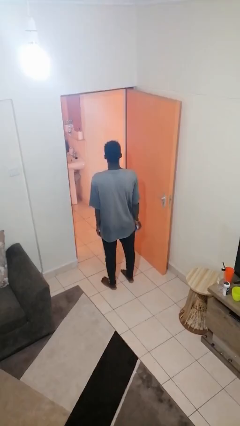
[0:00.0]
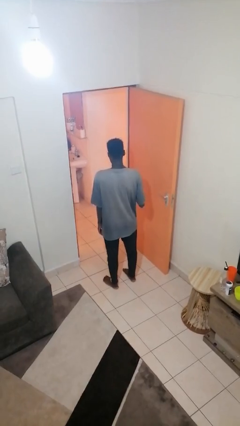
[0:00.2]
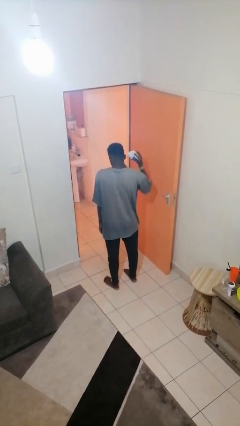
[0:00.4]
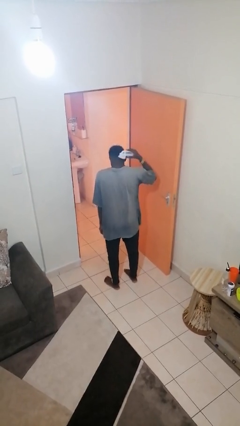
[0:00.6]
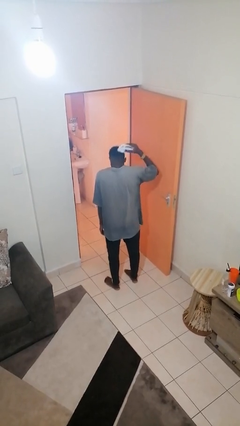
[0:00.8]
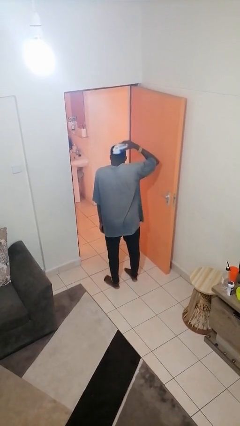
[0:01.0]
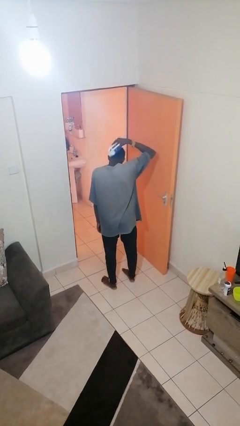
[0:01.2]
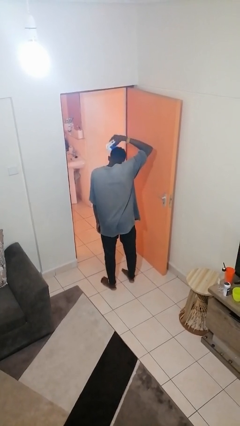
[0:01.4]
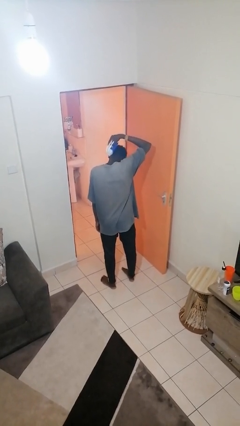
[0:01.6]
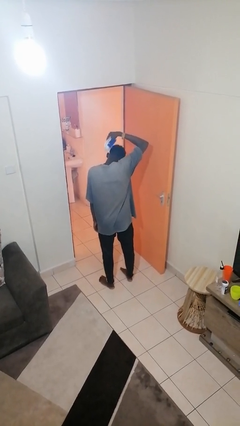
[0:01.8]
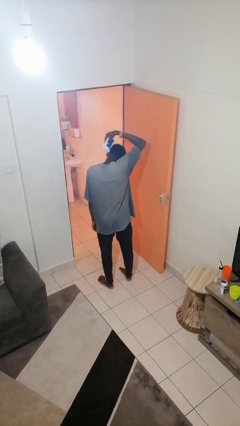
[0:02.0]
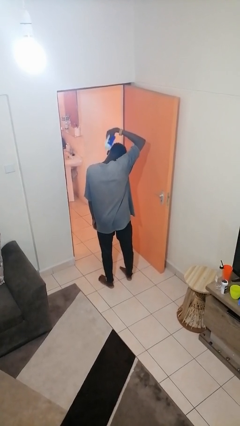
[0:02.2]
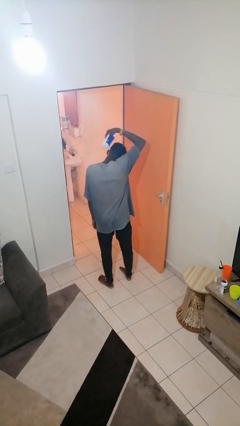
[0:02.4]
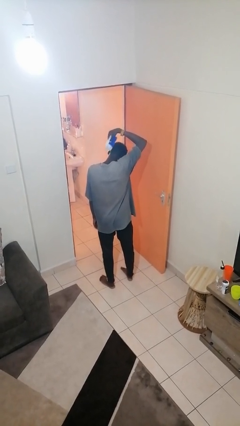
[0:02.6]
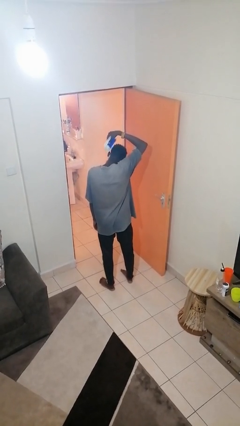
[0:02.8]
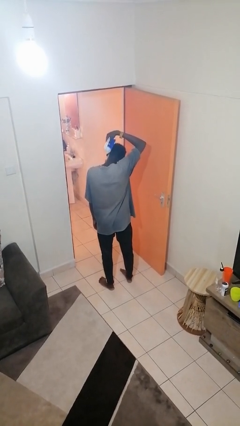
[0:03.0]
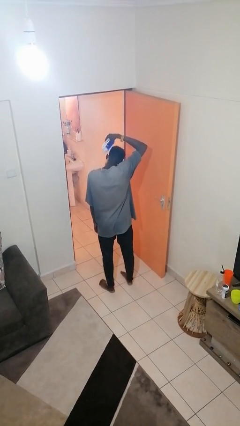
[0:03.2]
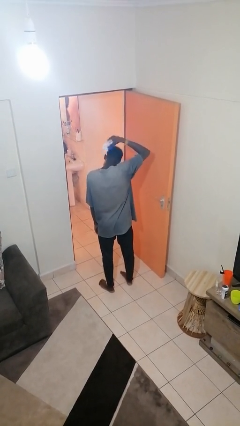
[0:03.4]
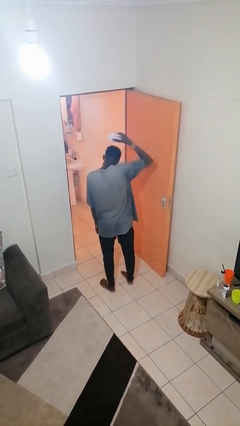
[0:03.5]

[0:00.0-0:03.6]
person brushes hair

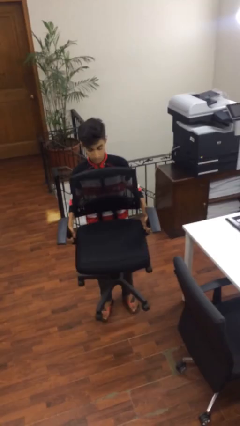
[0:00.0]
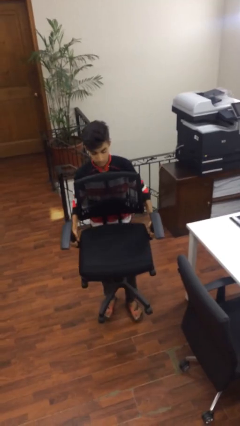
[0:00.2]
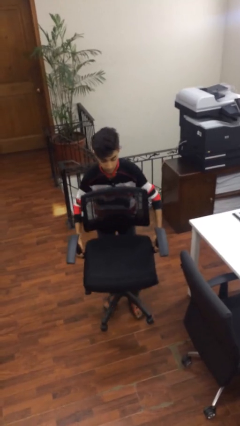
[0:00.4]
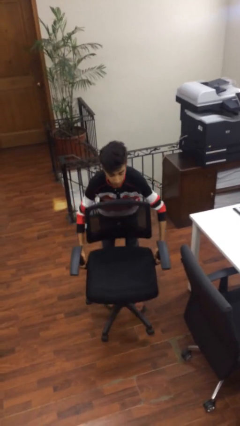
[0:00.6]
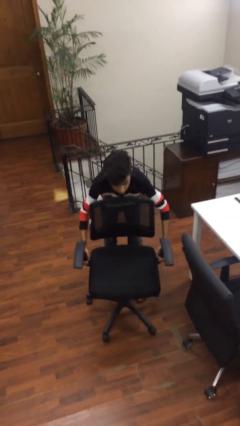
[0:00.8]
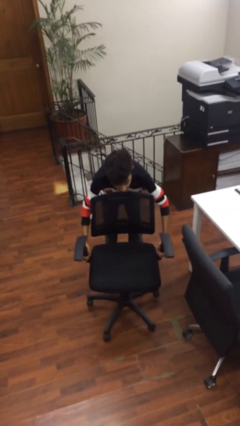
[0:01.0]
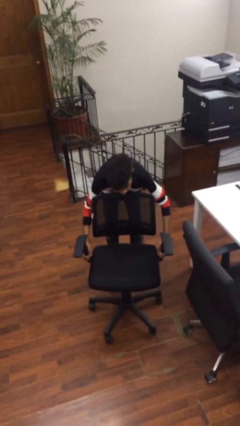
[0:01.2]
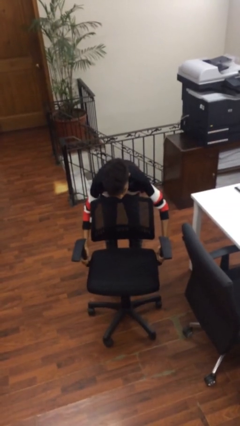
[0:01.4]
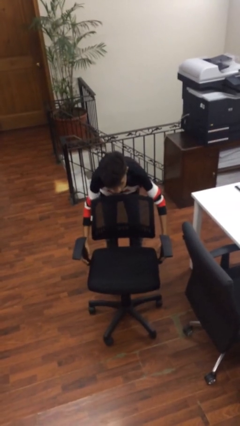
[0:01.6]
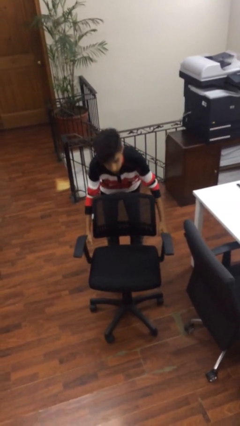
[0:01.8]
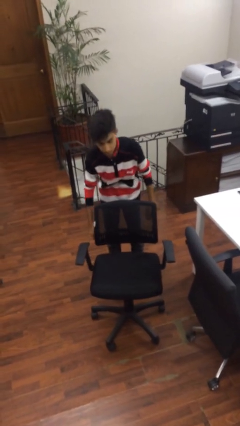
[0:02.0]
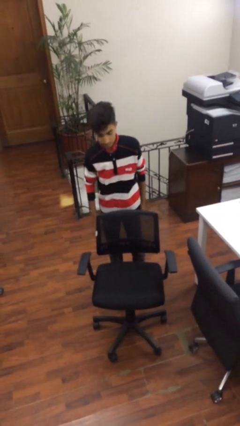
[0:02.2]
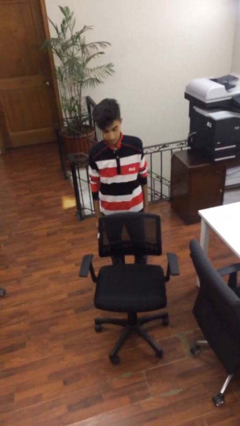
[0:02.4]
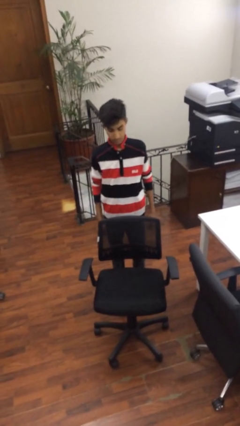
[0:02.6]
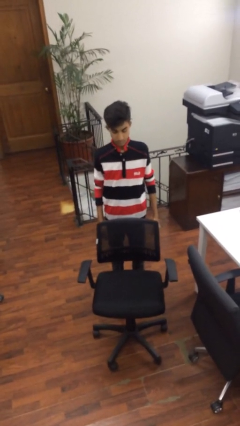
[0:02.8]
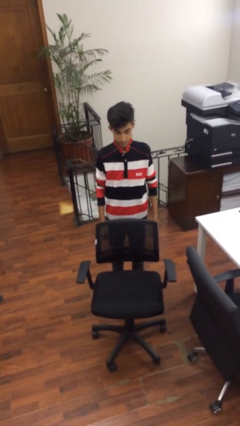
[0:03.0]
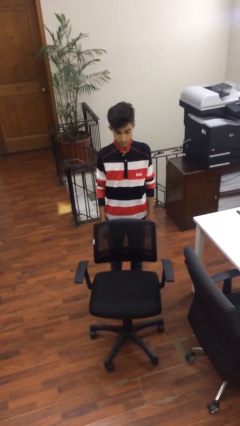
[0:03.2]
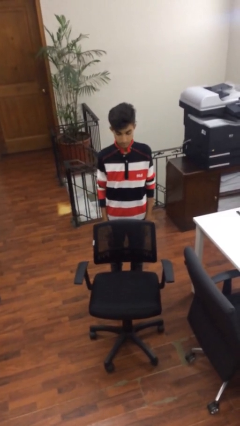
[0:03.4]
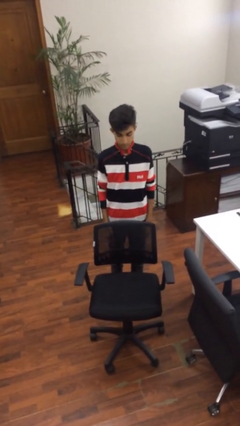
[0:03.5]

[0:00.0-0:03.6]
person puts down object on floor

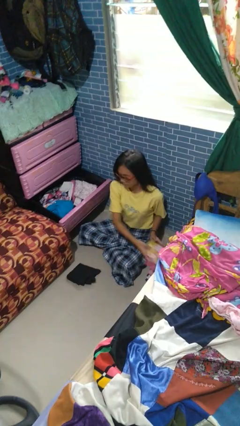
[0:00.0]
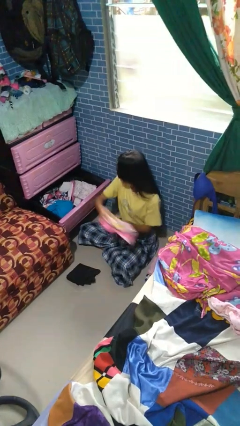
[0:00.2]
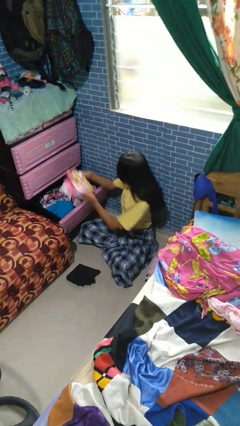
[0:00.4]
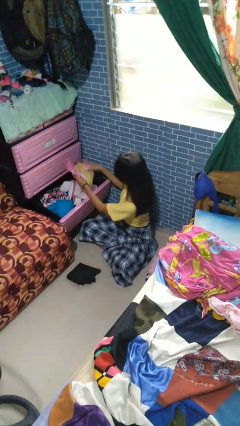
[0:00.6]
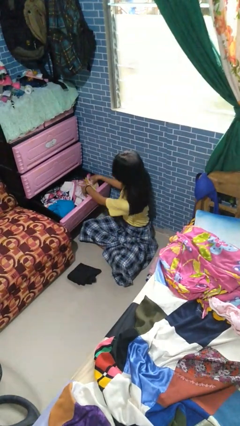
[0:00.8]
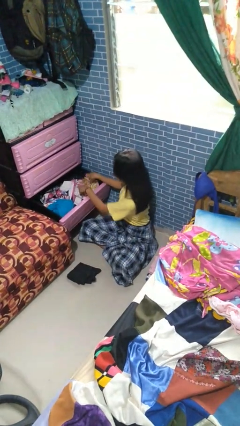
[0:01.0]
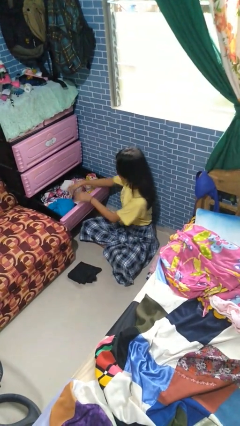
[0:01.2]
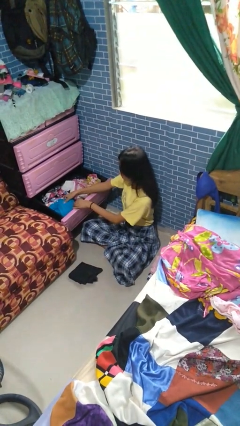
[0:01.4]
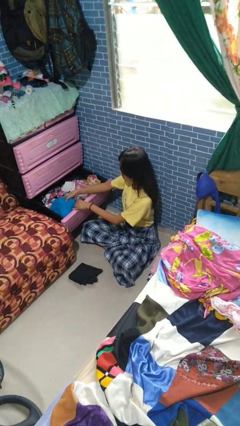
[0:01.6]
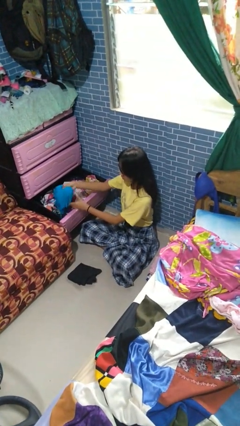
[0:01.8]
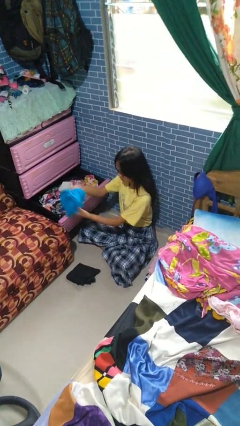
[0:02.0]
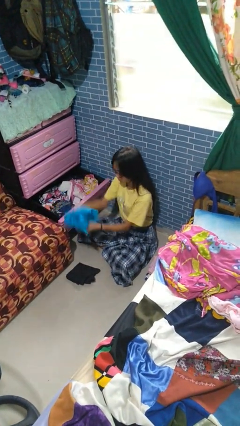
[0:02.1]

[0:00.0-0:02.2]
person puts clothes into dresser

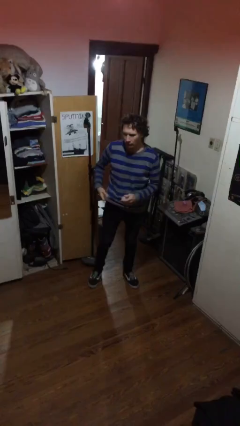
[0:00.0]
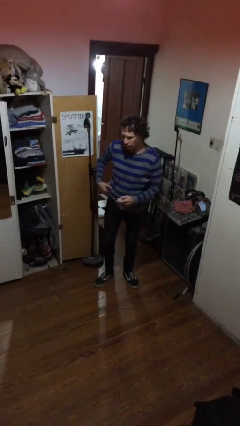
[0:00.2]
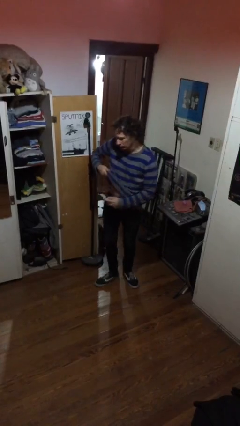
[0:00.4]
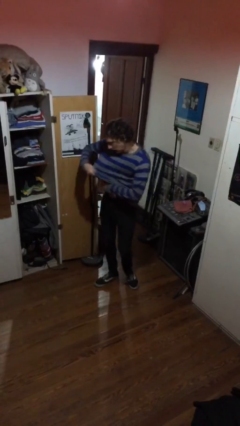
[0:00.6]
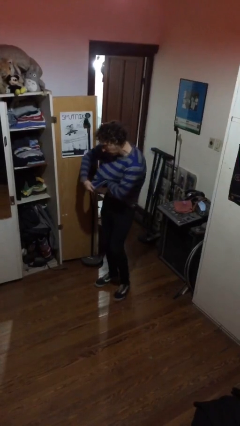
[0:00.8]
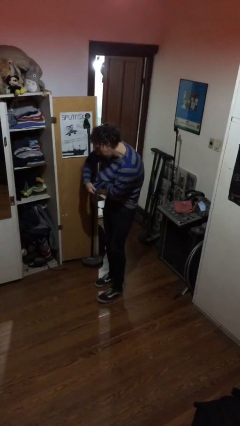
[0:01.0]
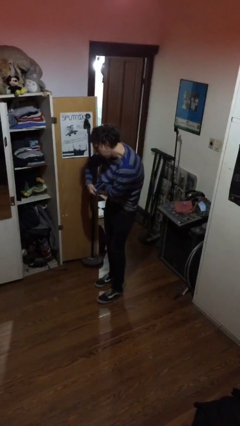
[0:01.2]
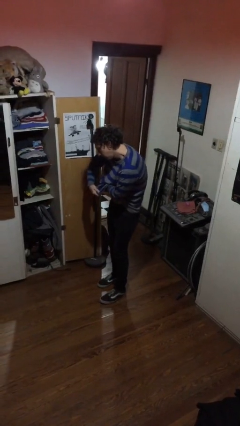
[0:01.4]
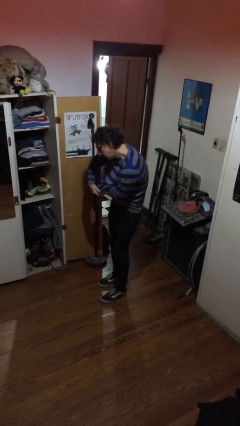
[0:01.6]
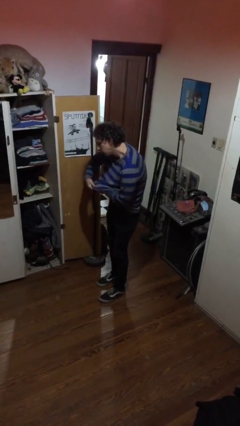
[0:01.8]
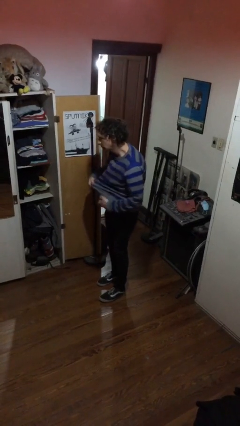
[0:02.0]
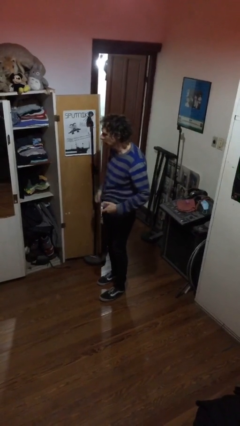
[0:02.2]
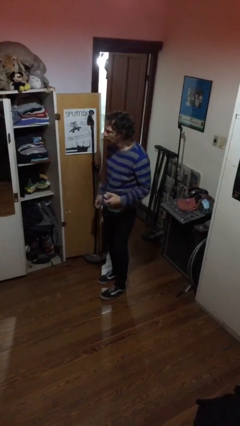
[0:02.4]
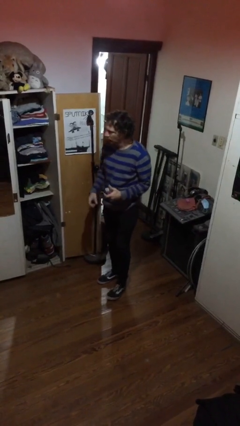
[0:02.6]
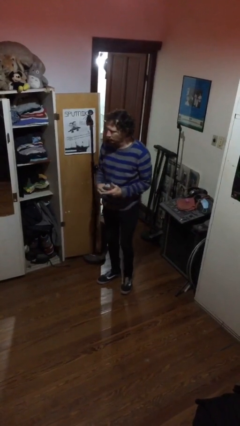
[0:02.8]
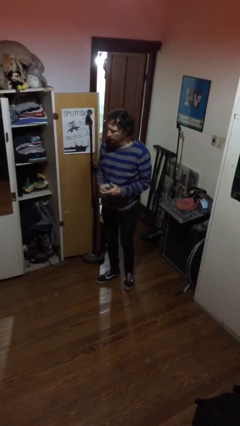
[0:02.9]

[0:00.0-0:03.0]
person applies deodorant

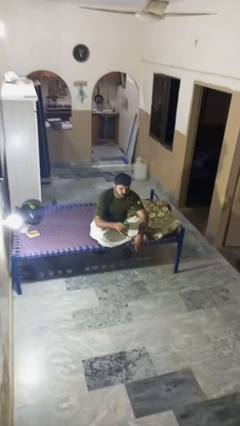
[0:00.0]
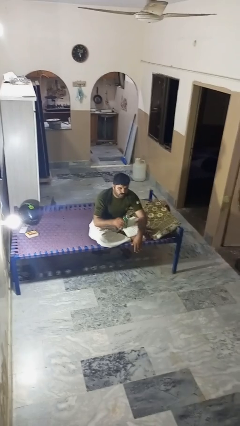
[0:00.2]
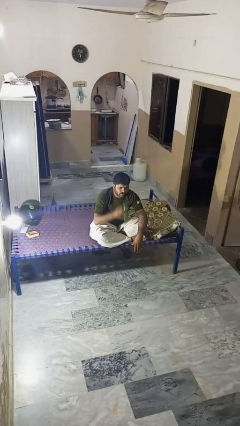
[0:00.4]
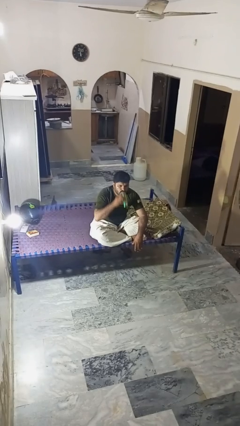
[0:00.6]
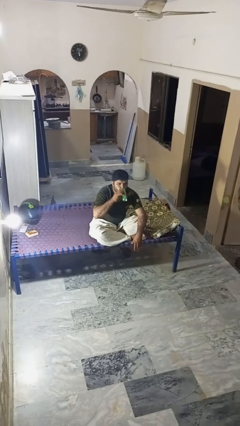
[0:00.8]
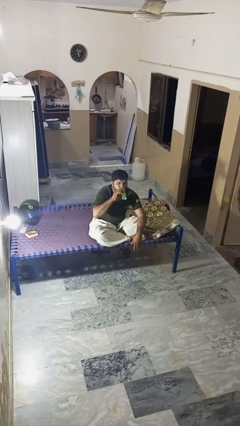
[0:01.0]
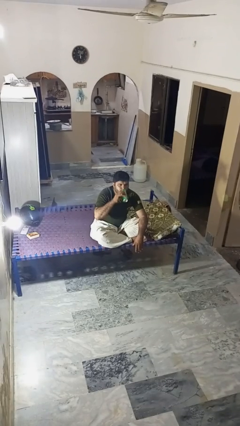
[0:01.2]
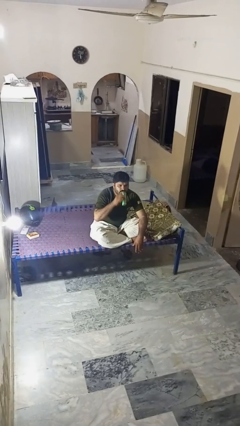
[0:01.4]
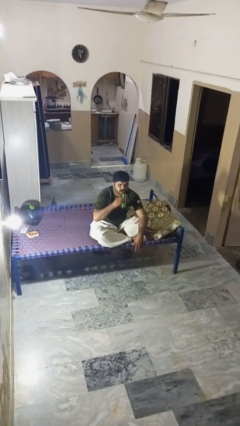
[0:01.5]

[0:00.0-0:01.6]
person drinks from beverage can

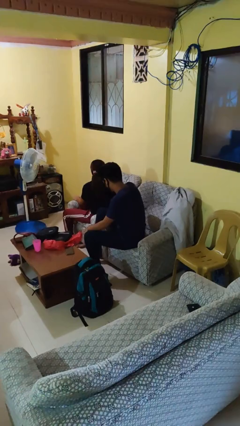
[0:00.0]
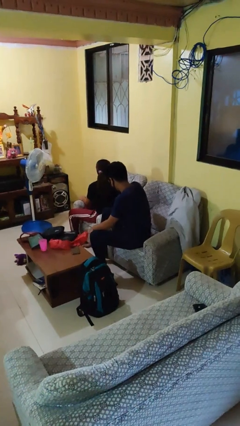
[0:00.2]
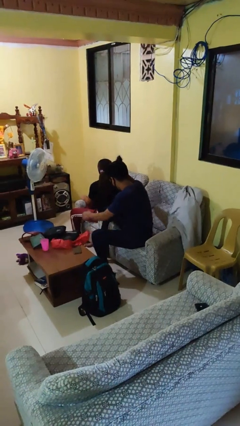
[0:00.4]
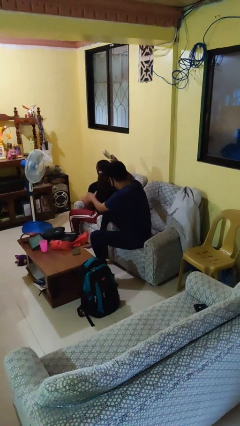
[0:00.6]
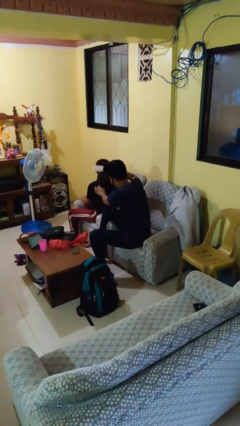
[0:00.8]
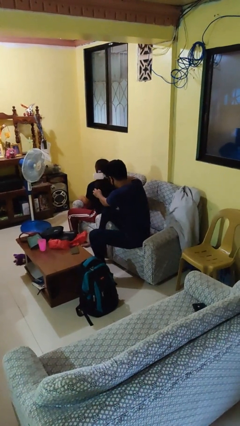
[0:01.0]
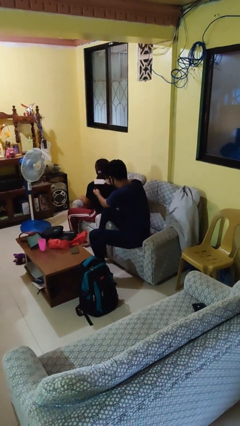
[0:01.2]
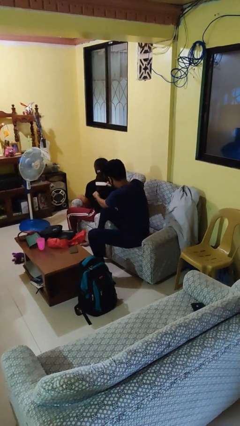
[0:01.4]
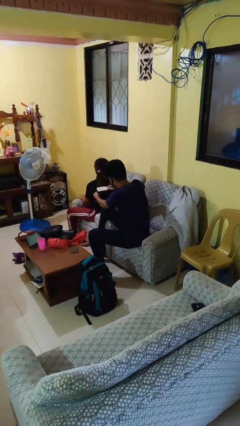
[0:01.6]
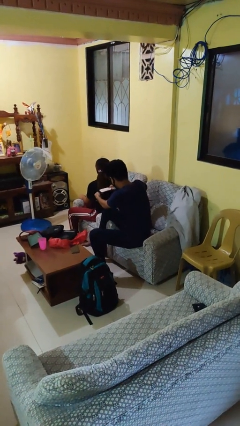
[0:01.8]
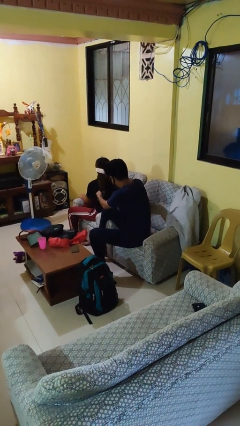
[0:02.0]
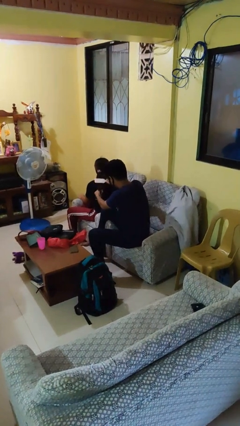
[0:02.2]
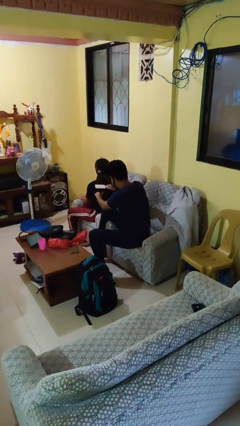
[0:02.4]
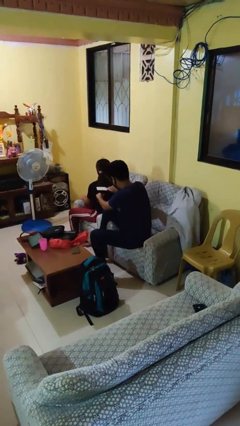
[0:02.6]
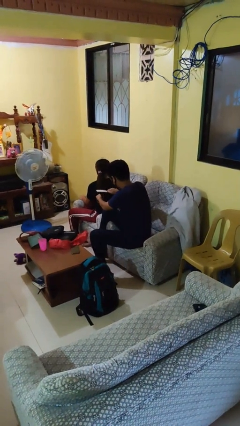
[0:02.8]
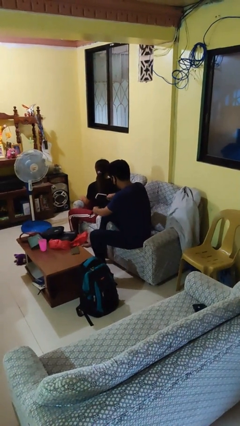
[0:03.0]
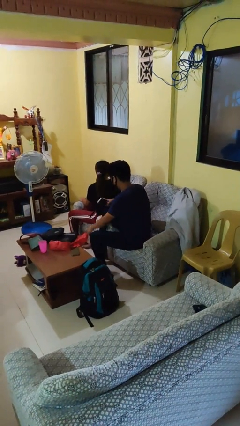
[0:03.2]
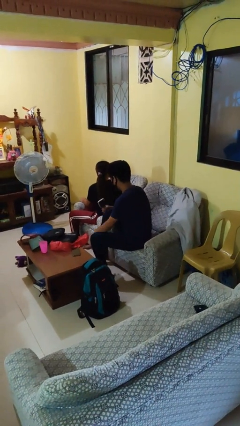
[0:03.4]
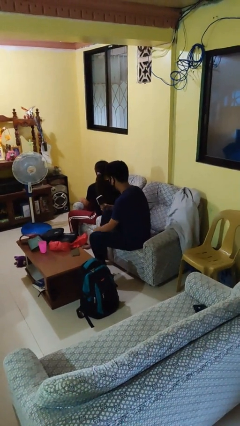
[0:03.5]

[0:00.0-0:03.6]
person brushes hair of person
